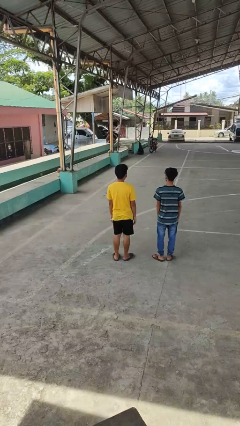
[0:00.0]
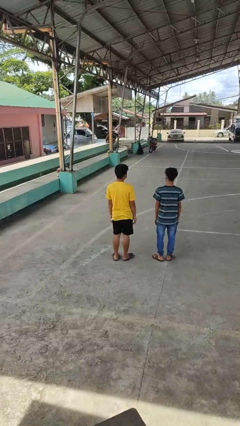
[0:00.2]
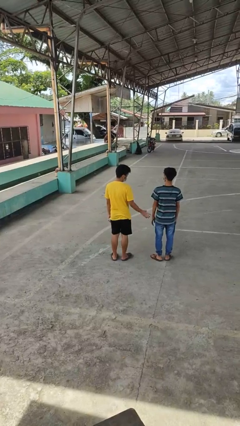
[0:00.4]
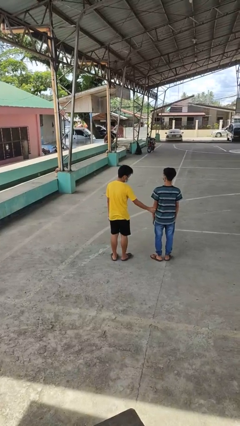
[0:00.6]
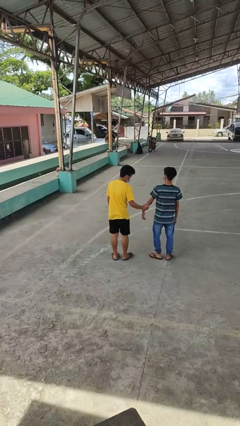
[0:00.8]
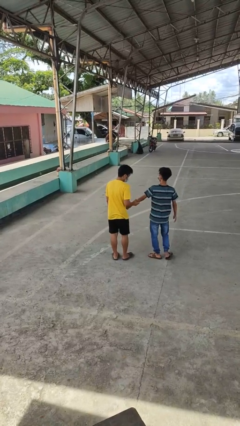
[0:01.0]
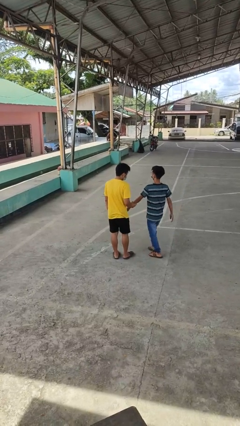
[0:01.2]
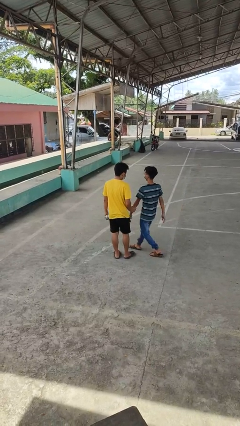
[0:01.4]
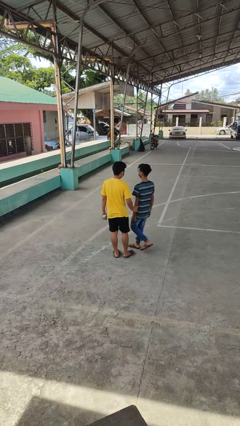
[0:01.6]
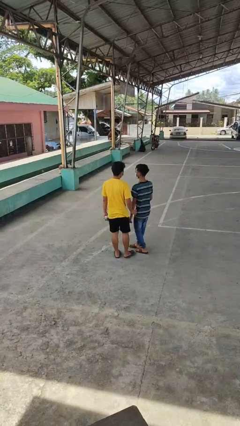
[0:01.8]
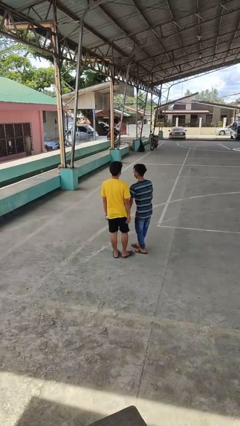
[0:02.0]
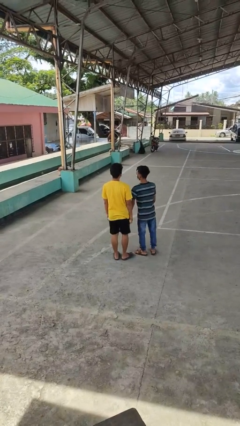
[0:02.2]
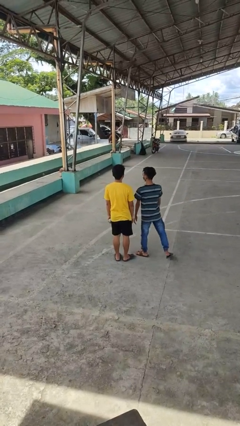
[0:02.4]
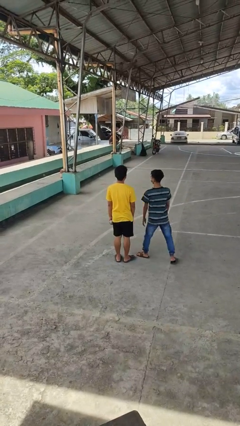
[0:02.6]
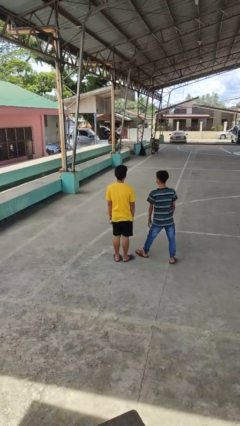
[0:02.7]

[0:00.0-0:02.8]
person grabs person by forearm

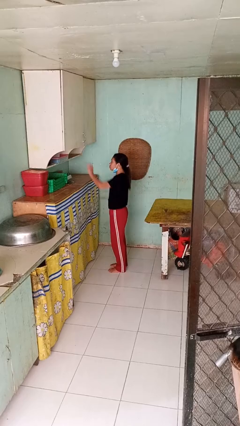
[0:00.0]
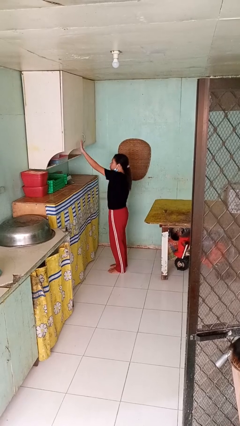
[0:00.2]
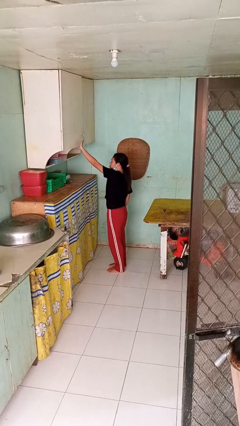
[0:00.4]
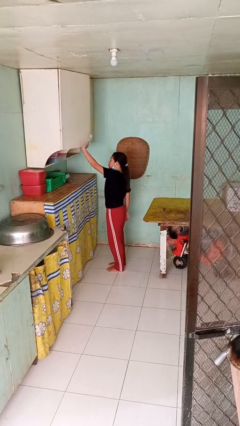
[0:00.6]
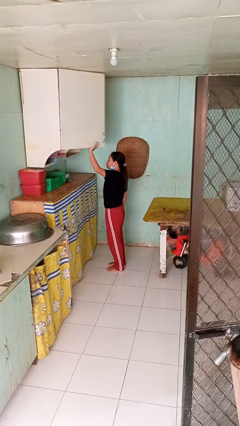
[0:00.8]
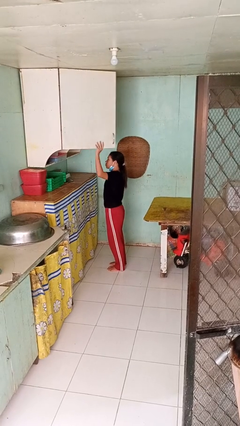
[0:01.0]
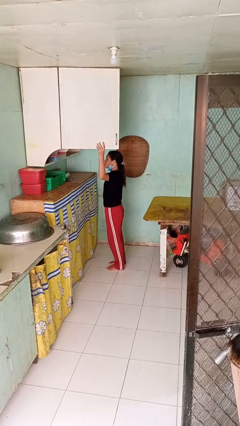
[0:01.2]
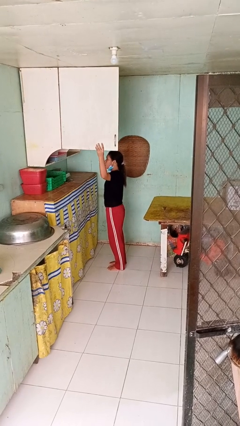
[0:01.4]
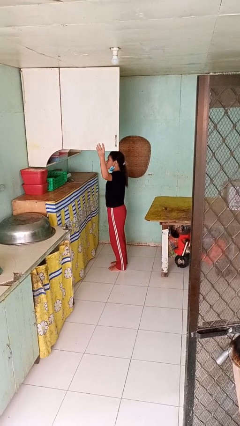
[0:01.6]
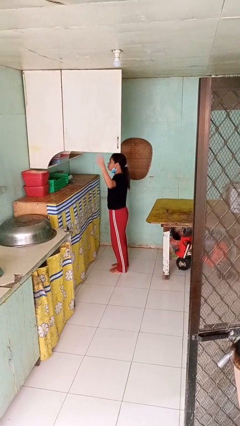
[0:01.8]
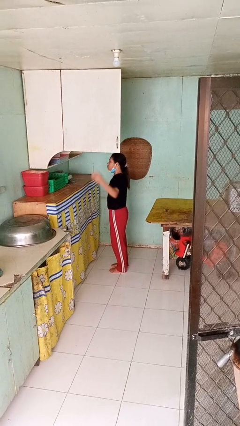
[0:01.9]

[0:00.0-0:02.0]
person opens cabinet

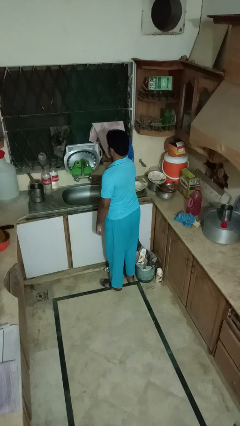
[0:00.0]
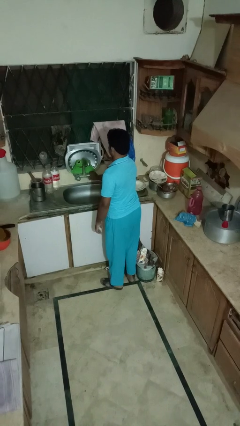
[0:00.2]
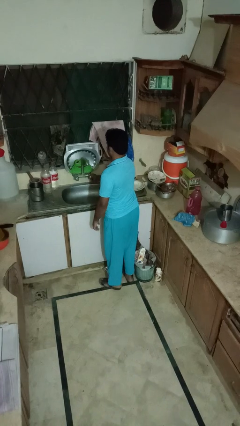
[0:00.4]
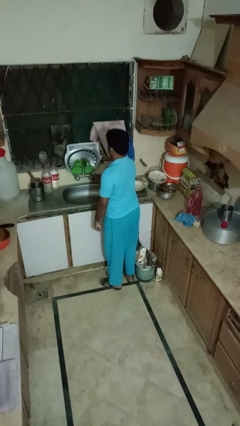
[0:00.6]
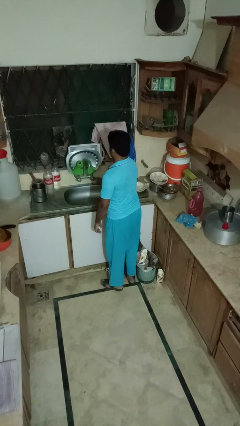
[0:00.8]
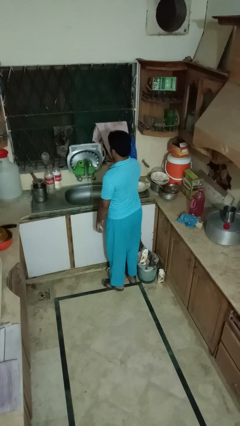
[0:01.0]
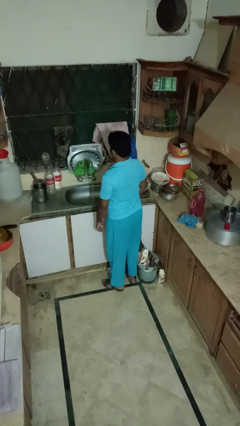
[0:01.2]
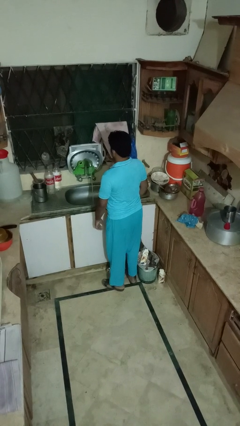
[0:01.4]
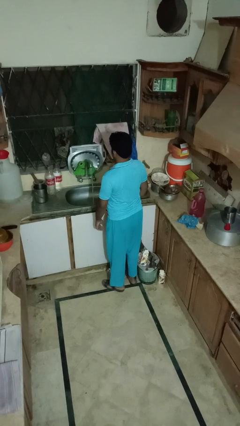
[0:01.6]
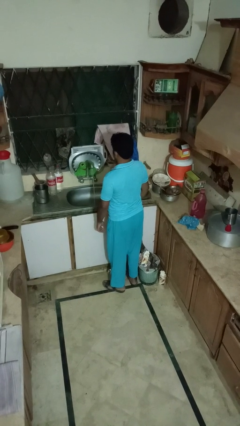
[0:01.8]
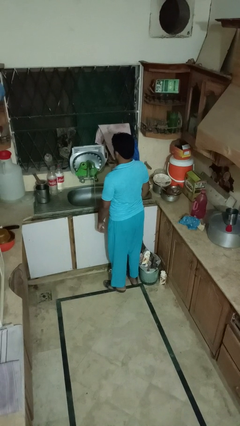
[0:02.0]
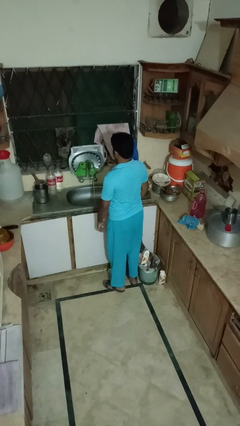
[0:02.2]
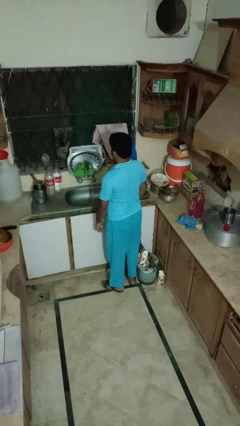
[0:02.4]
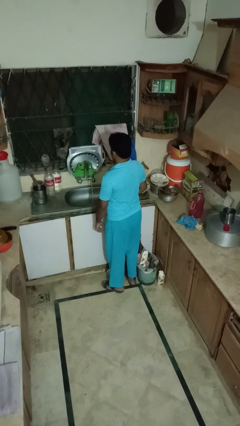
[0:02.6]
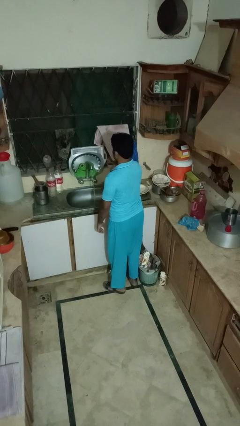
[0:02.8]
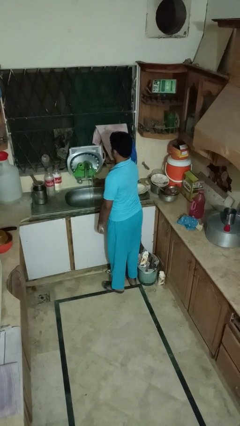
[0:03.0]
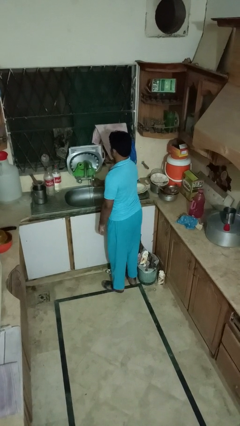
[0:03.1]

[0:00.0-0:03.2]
person turns on faucet

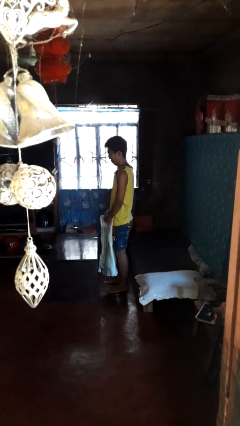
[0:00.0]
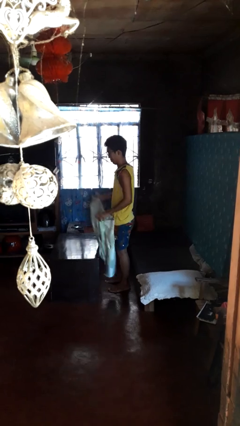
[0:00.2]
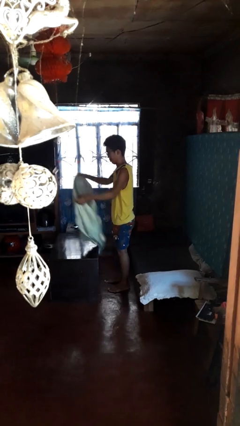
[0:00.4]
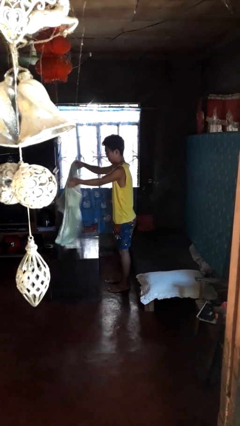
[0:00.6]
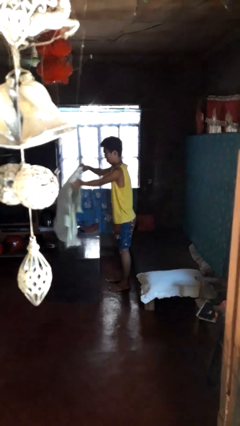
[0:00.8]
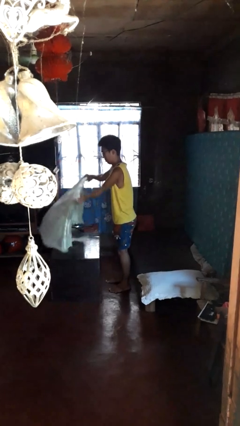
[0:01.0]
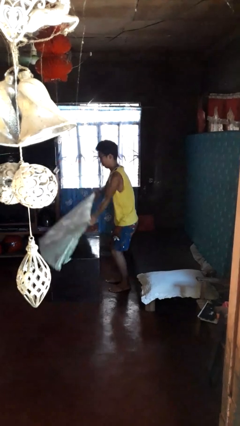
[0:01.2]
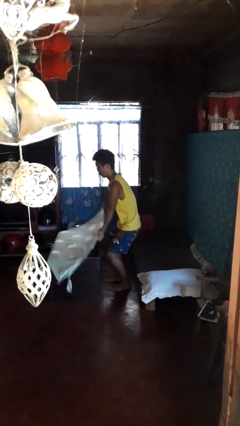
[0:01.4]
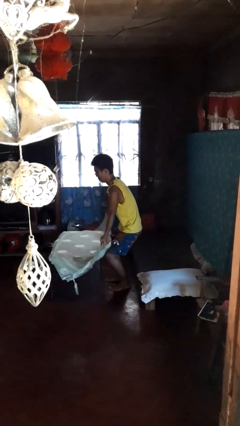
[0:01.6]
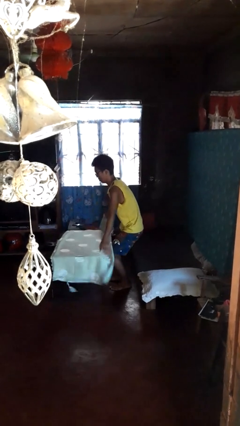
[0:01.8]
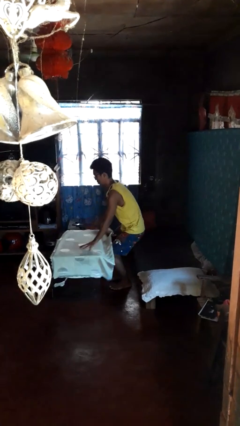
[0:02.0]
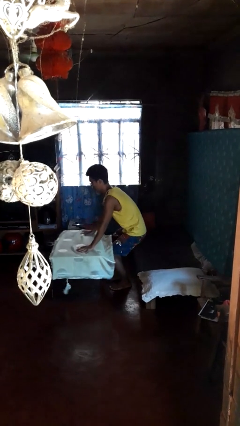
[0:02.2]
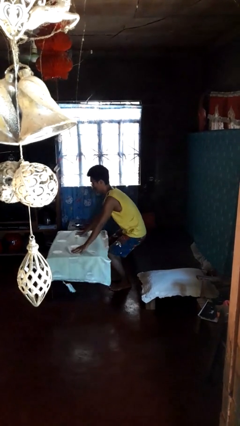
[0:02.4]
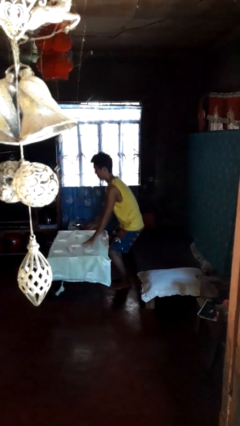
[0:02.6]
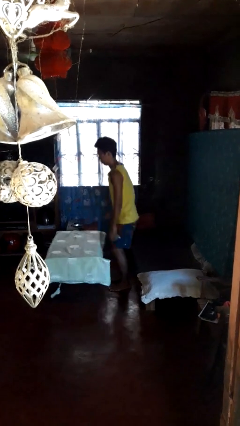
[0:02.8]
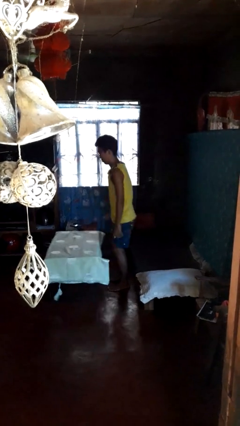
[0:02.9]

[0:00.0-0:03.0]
person spreads tablecloth

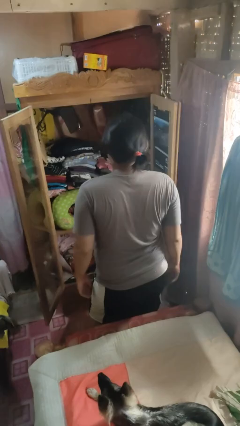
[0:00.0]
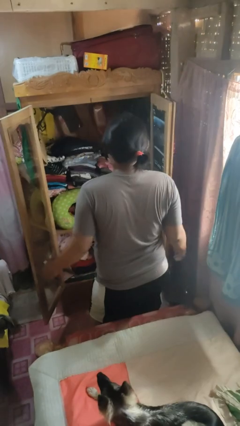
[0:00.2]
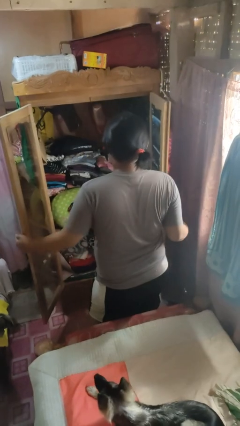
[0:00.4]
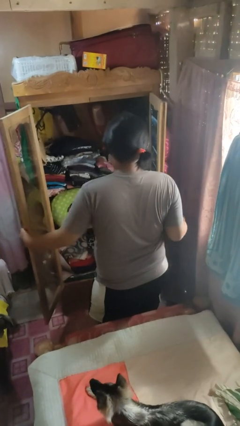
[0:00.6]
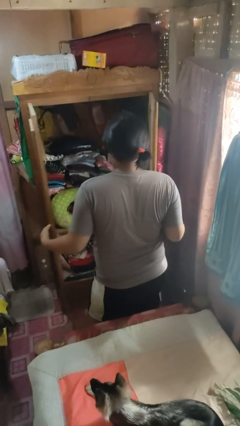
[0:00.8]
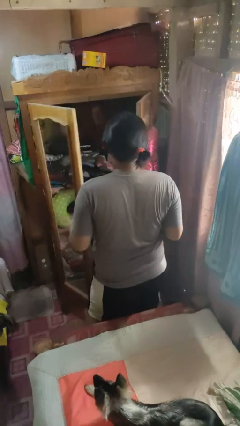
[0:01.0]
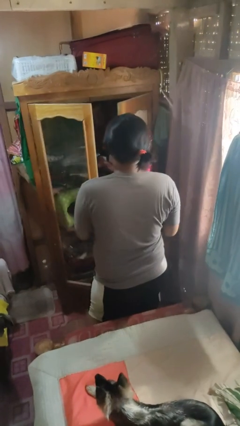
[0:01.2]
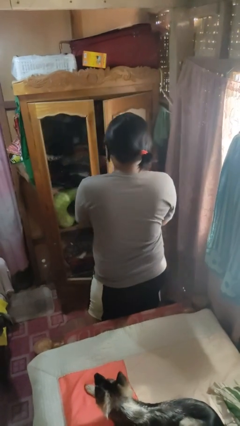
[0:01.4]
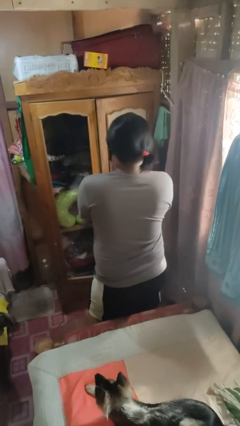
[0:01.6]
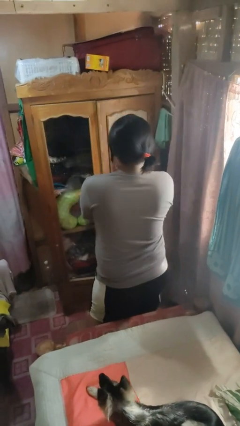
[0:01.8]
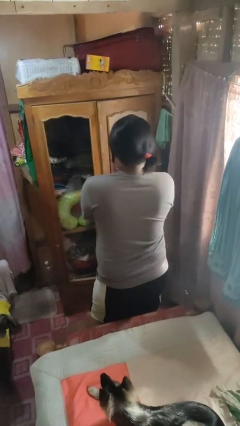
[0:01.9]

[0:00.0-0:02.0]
person closes closet door

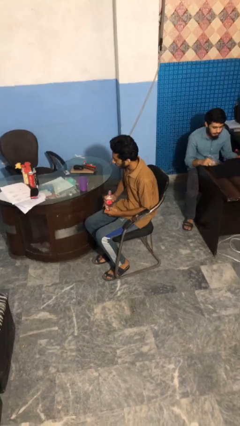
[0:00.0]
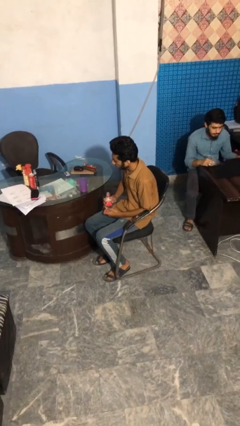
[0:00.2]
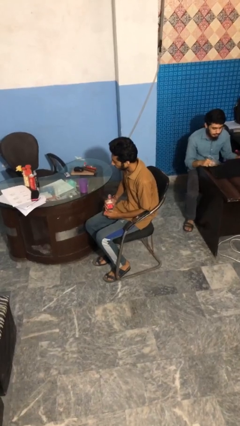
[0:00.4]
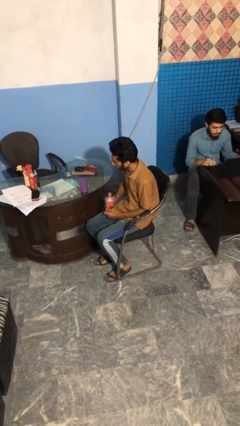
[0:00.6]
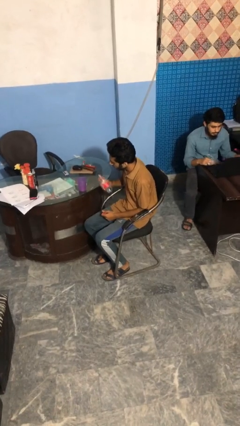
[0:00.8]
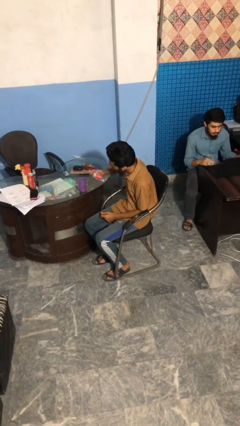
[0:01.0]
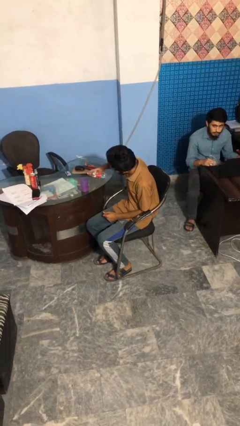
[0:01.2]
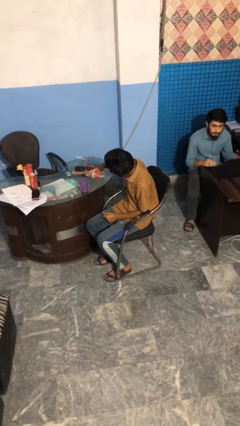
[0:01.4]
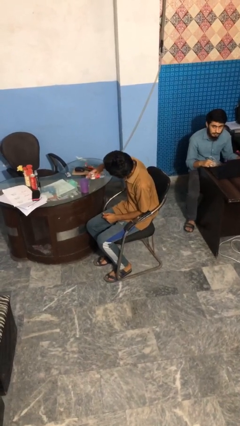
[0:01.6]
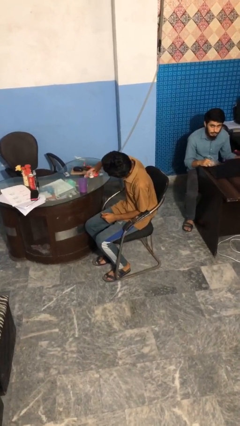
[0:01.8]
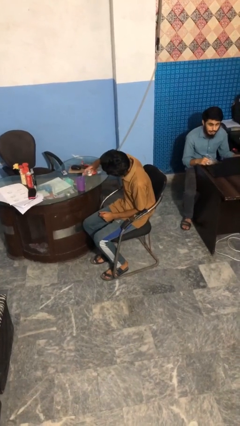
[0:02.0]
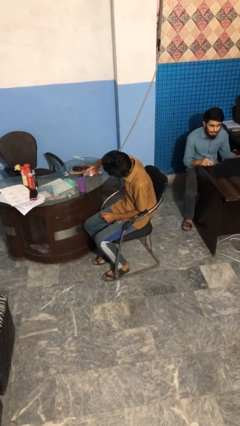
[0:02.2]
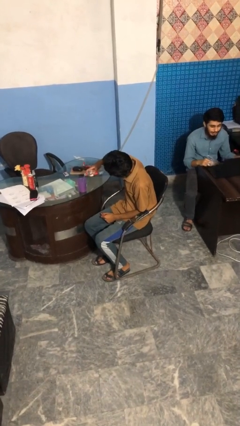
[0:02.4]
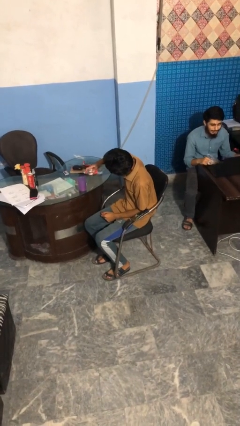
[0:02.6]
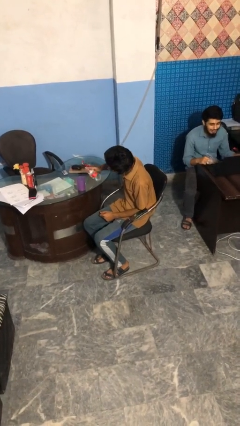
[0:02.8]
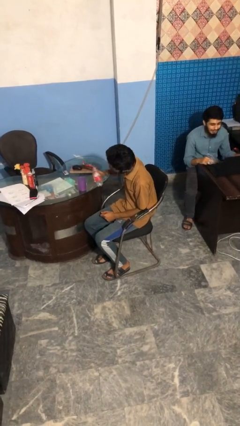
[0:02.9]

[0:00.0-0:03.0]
person pours liquid into cup

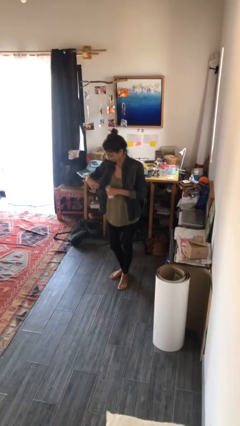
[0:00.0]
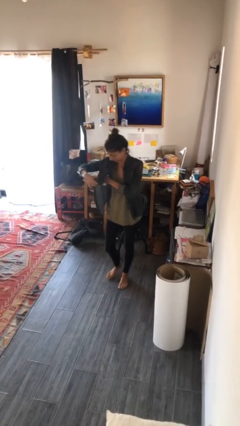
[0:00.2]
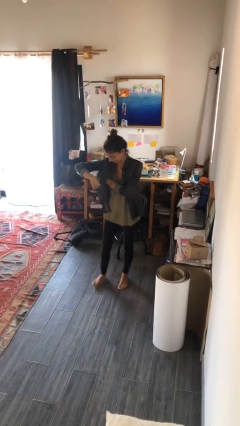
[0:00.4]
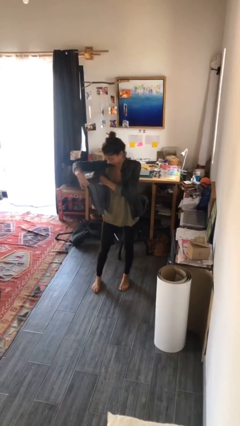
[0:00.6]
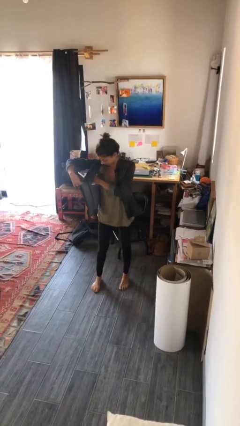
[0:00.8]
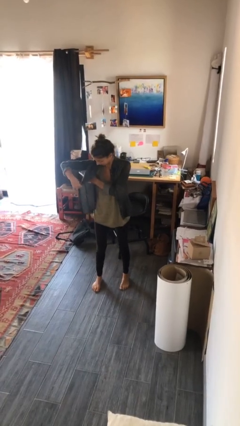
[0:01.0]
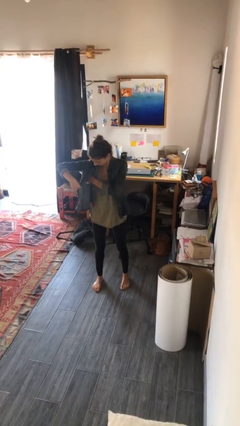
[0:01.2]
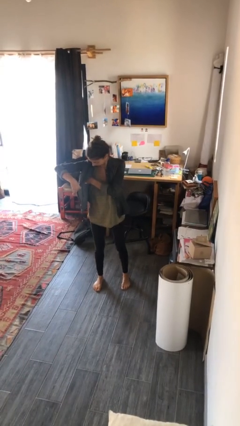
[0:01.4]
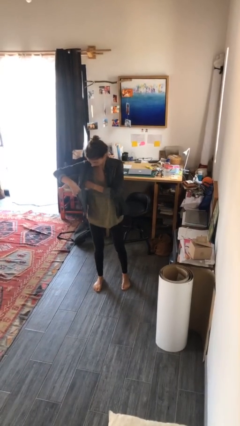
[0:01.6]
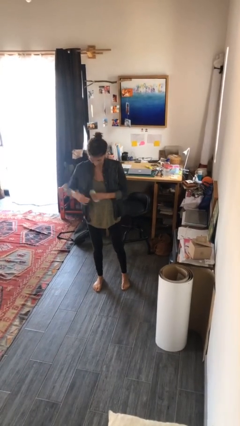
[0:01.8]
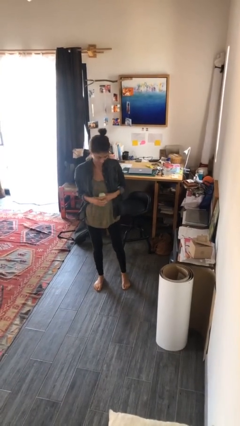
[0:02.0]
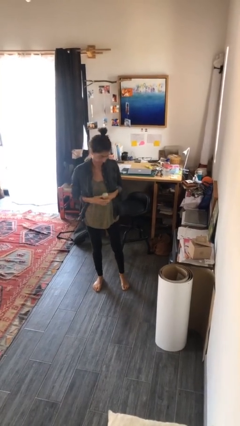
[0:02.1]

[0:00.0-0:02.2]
person applies deodorant
